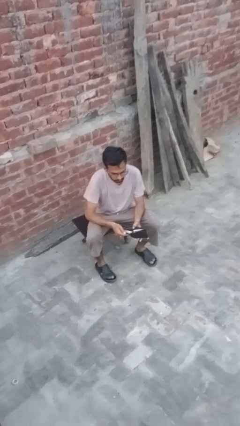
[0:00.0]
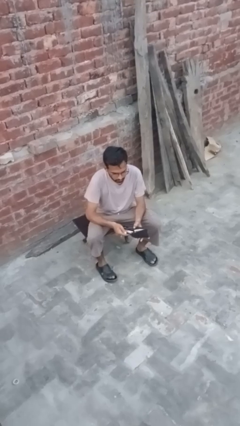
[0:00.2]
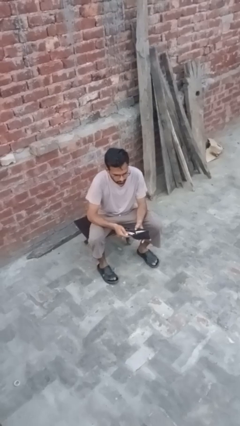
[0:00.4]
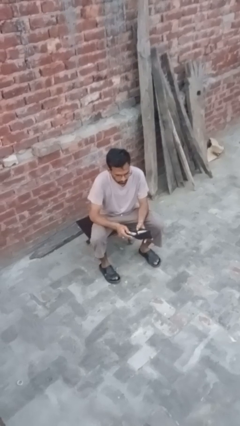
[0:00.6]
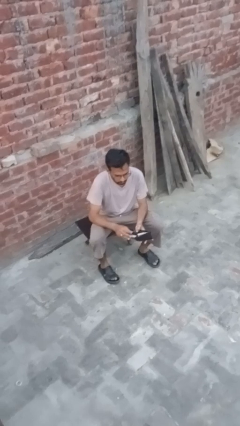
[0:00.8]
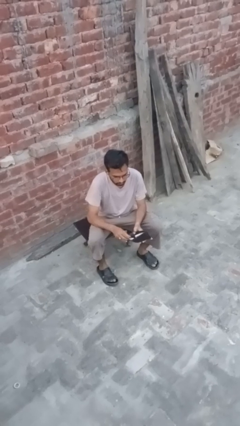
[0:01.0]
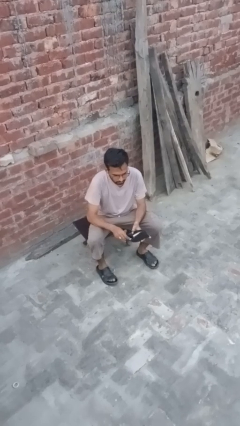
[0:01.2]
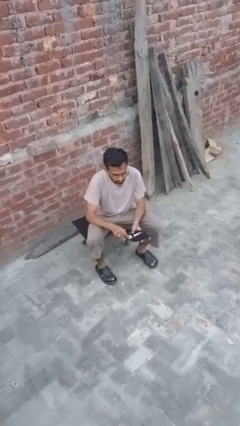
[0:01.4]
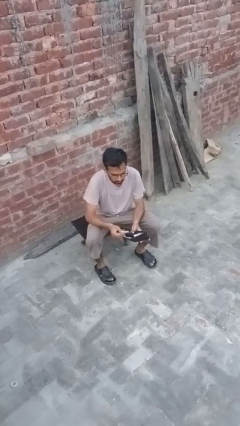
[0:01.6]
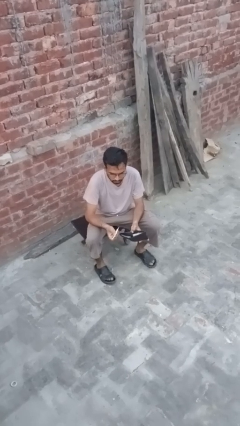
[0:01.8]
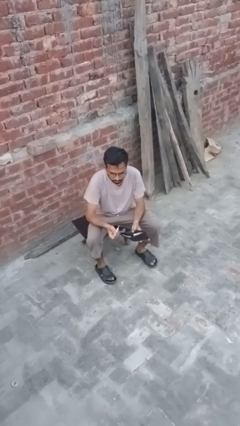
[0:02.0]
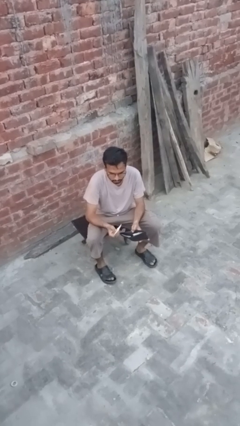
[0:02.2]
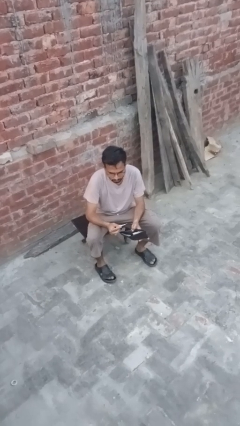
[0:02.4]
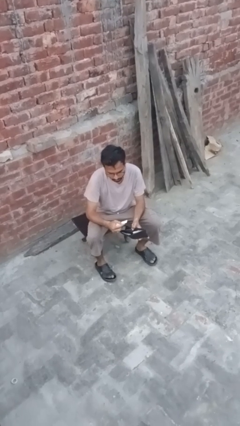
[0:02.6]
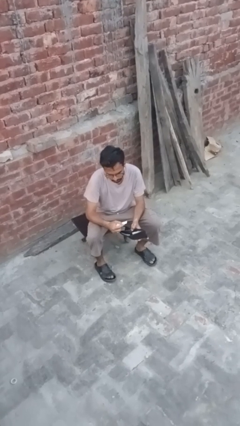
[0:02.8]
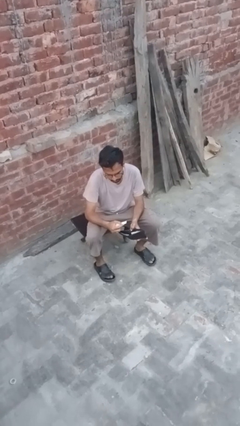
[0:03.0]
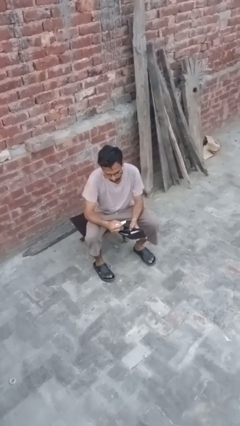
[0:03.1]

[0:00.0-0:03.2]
person takes object from purse

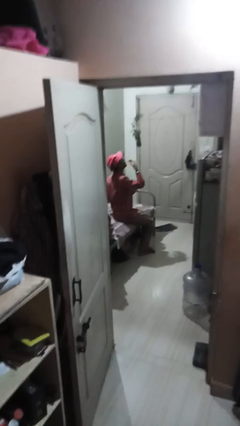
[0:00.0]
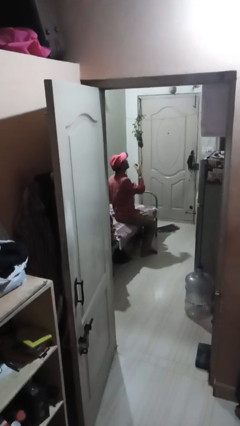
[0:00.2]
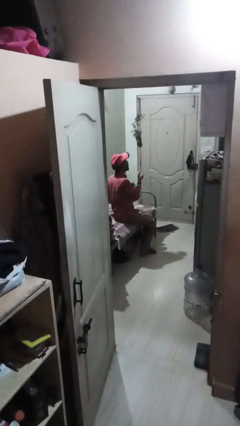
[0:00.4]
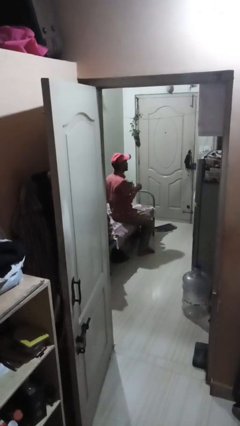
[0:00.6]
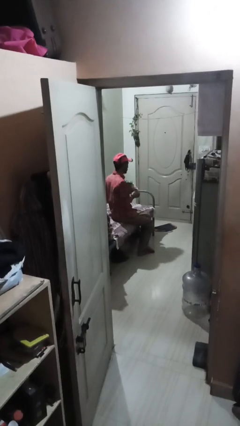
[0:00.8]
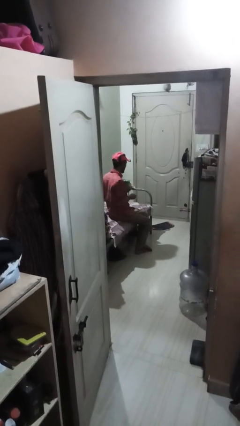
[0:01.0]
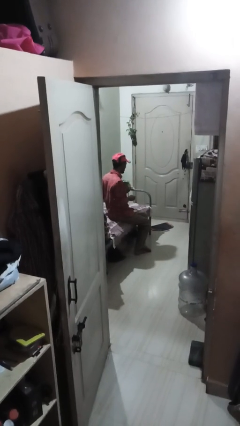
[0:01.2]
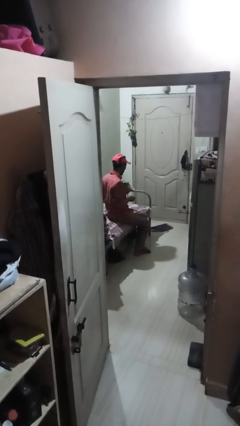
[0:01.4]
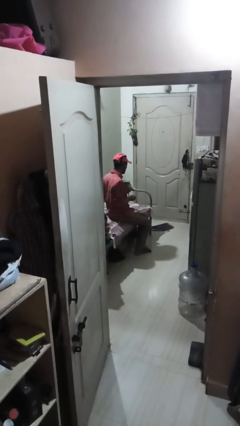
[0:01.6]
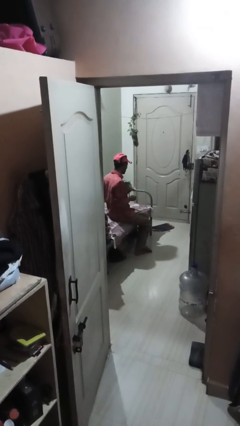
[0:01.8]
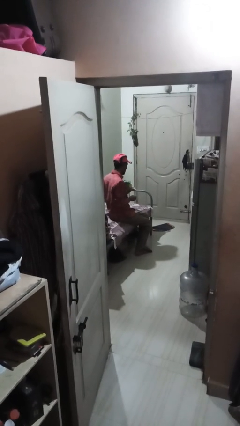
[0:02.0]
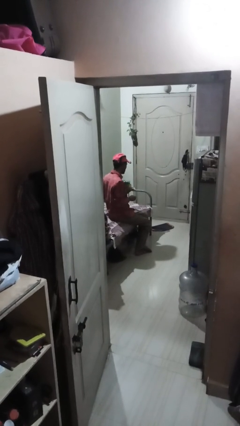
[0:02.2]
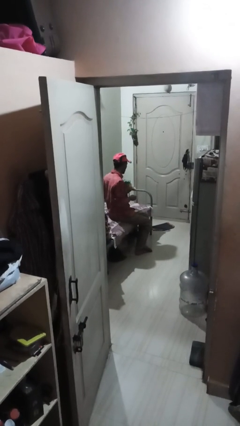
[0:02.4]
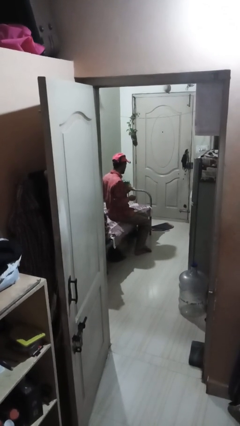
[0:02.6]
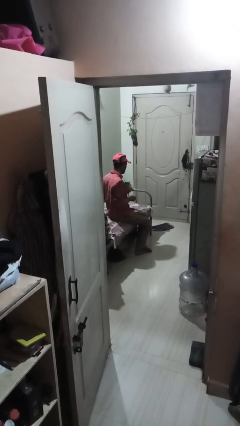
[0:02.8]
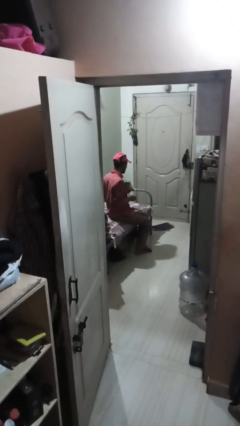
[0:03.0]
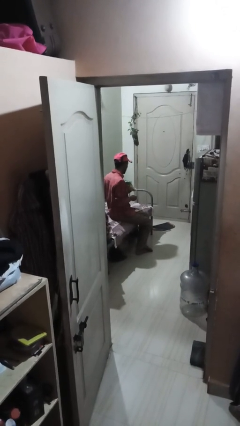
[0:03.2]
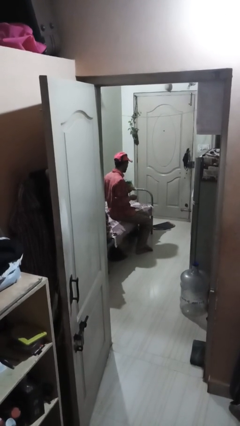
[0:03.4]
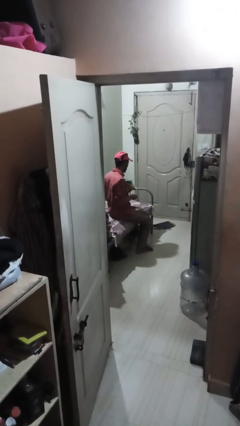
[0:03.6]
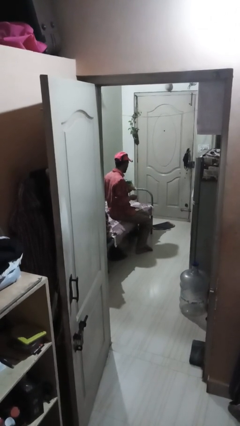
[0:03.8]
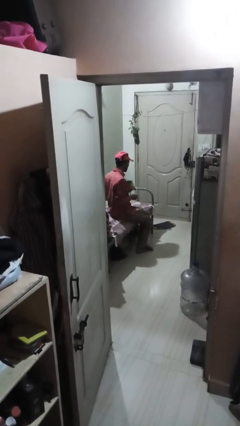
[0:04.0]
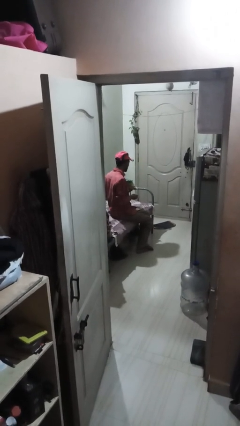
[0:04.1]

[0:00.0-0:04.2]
person eats snack from bag

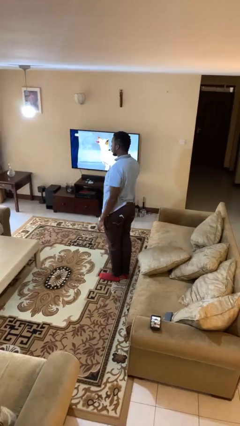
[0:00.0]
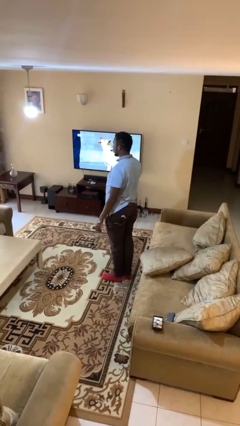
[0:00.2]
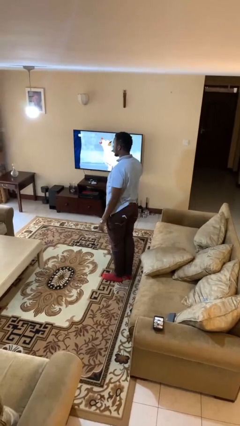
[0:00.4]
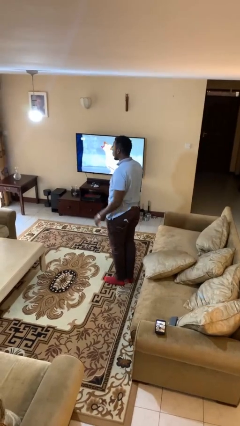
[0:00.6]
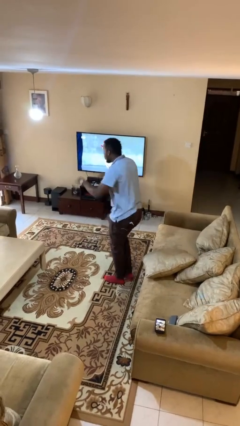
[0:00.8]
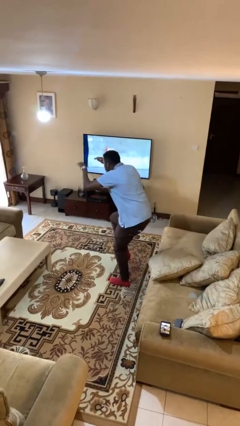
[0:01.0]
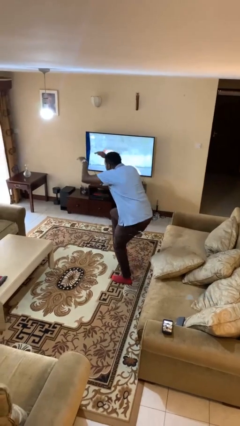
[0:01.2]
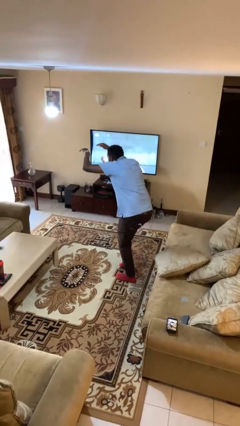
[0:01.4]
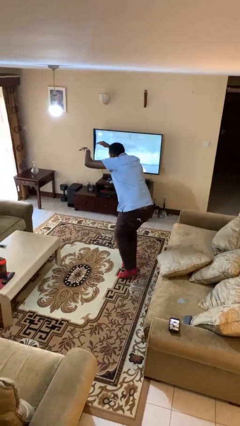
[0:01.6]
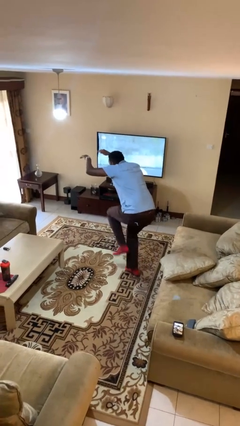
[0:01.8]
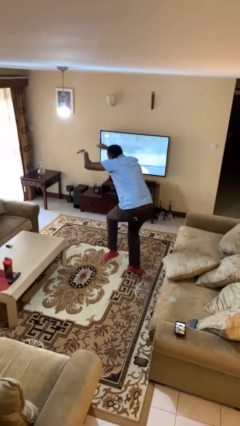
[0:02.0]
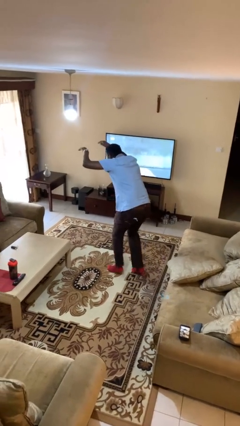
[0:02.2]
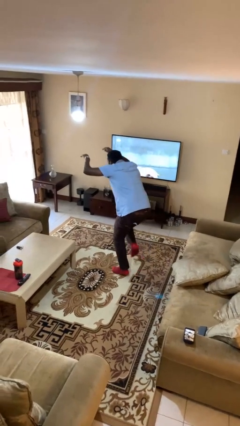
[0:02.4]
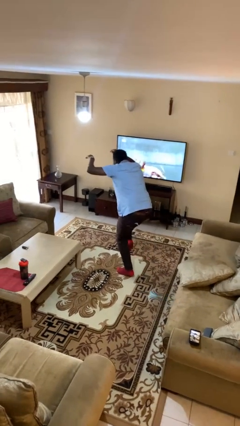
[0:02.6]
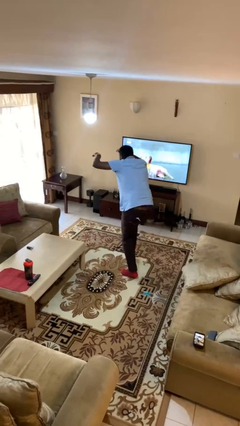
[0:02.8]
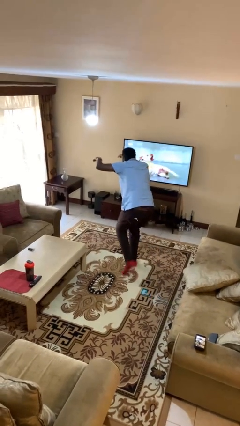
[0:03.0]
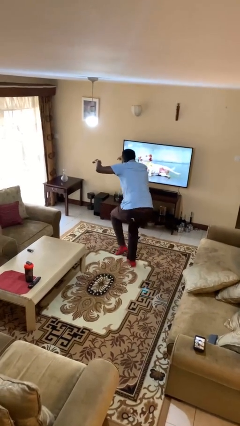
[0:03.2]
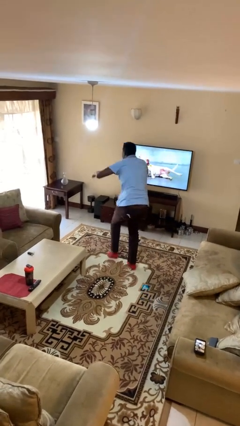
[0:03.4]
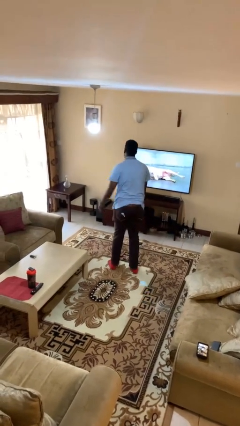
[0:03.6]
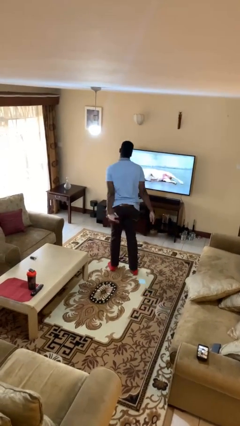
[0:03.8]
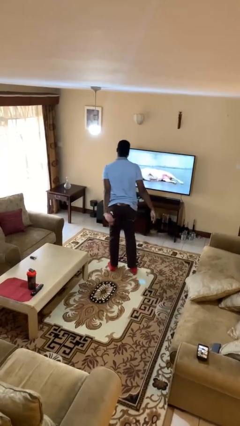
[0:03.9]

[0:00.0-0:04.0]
person walks tiptoe

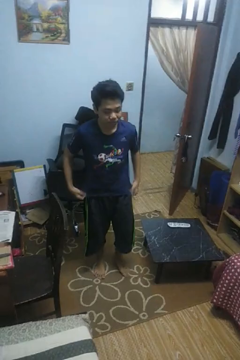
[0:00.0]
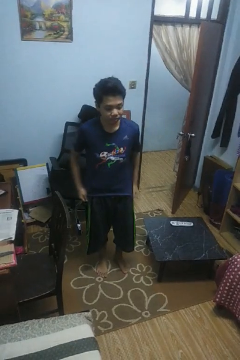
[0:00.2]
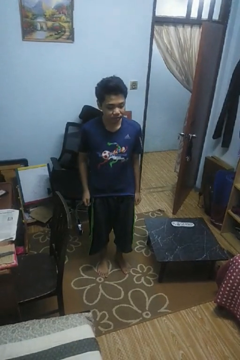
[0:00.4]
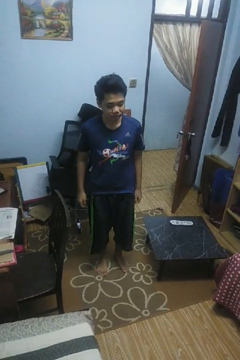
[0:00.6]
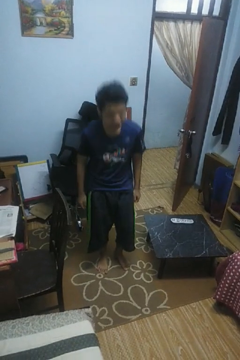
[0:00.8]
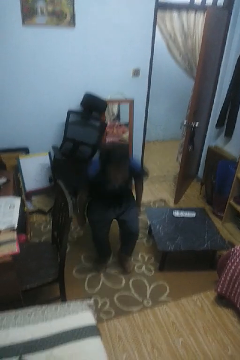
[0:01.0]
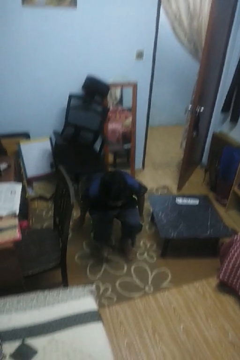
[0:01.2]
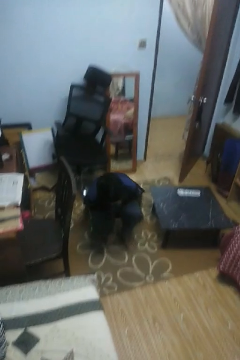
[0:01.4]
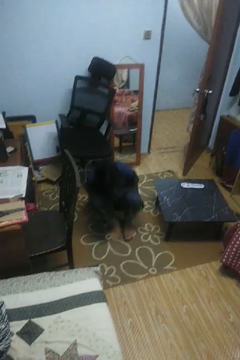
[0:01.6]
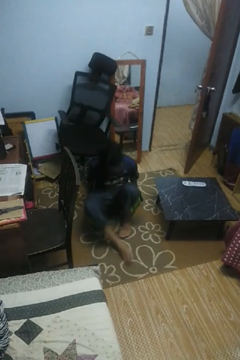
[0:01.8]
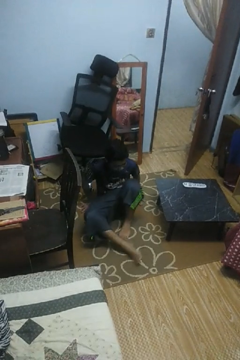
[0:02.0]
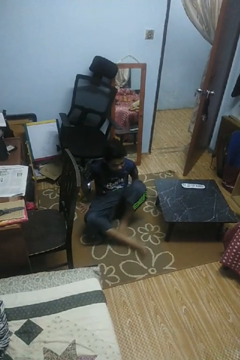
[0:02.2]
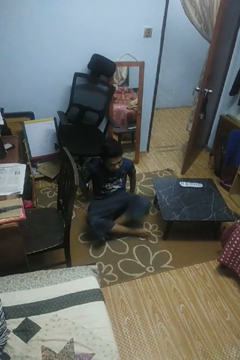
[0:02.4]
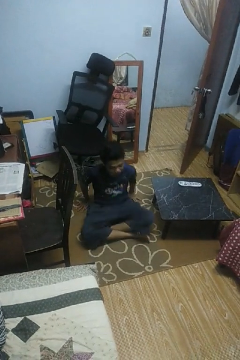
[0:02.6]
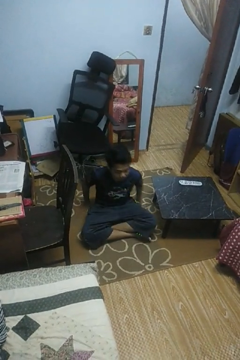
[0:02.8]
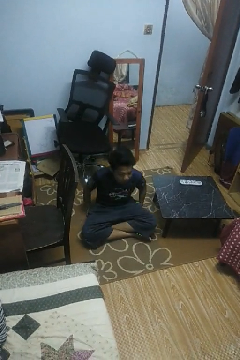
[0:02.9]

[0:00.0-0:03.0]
person sits crisscross

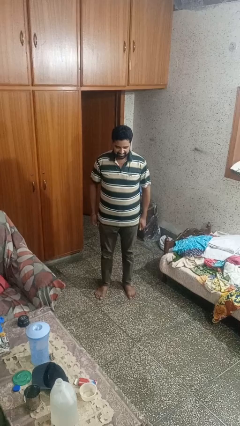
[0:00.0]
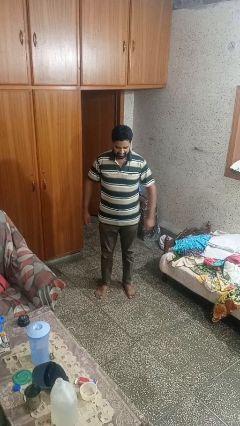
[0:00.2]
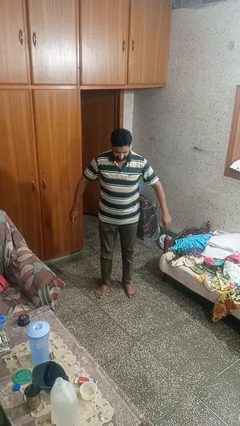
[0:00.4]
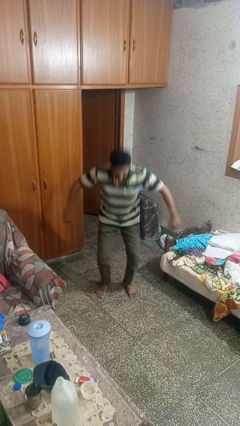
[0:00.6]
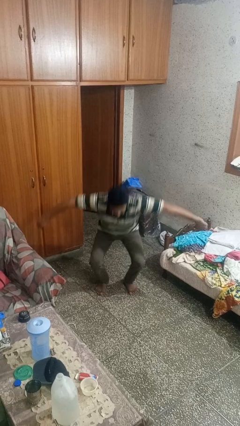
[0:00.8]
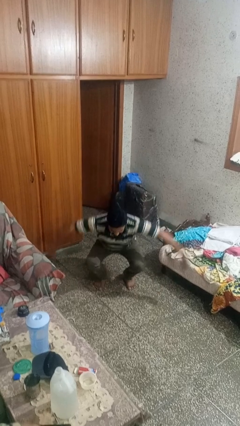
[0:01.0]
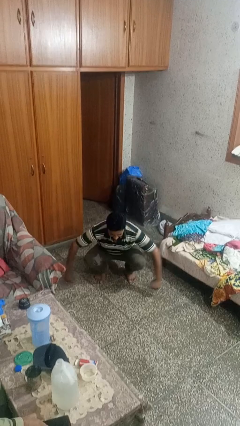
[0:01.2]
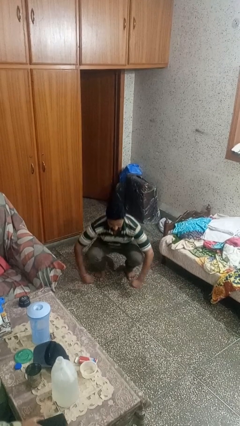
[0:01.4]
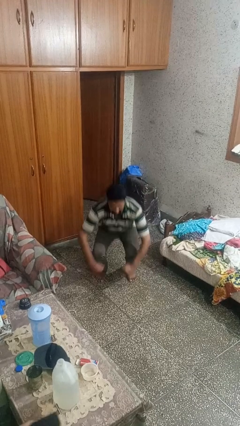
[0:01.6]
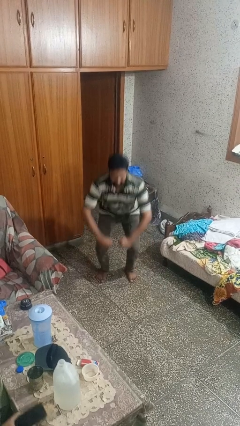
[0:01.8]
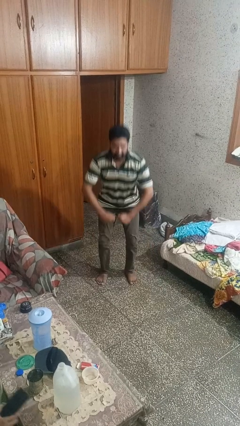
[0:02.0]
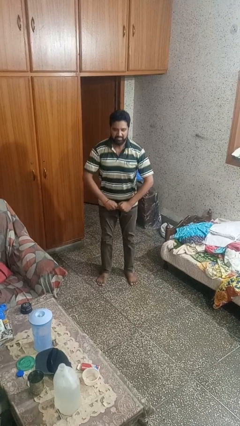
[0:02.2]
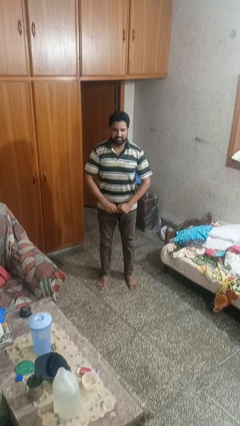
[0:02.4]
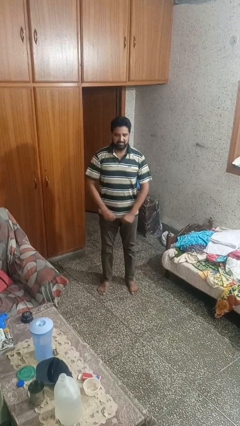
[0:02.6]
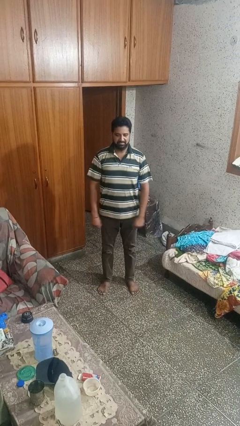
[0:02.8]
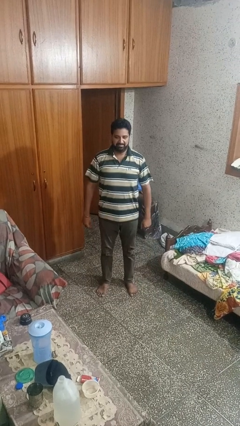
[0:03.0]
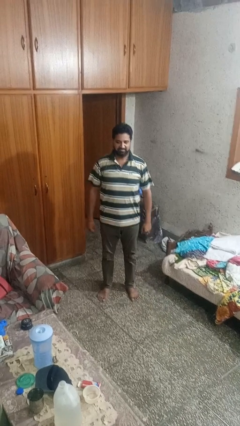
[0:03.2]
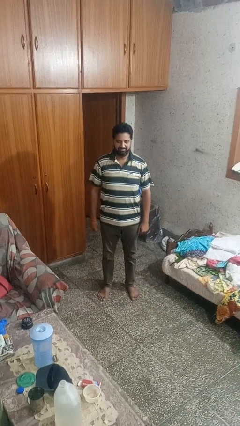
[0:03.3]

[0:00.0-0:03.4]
person exercises with situp
